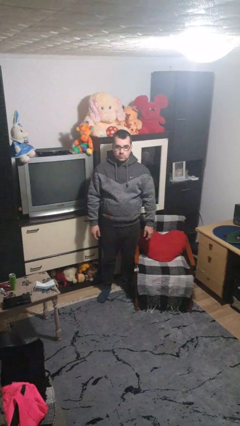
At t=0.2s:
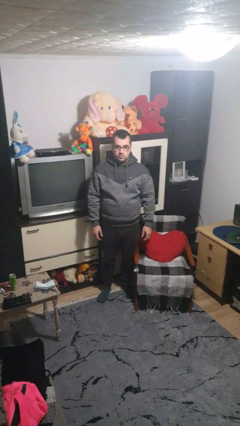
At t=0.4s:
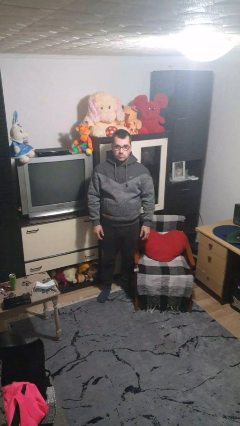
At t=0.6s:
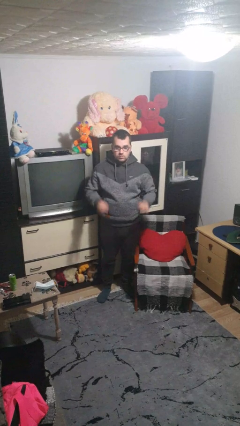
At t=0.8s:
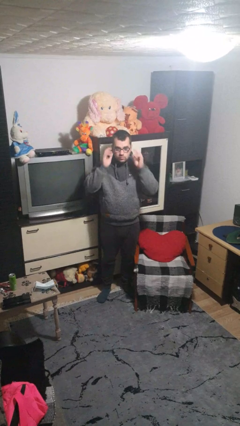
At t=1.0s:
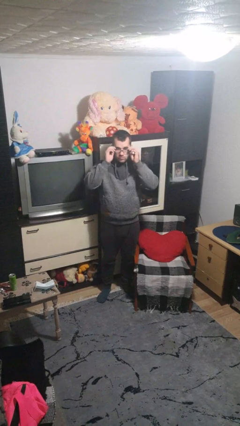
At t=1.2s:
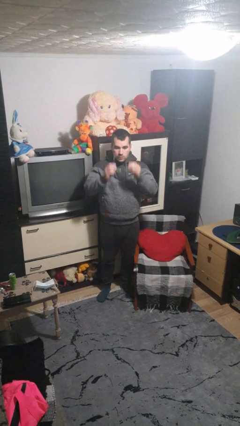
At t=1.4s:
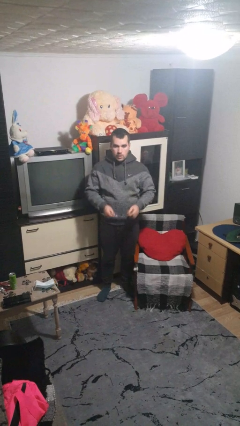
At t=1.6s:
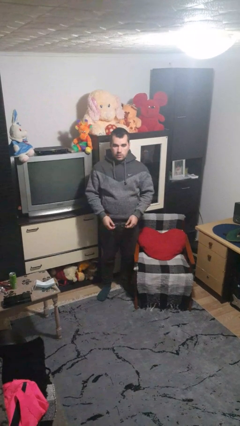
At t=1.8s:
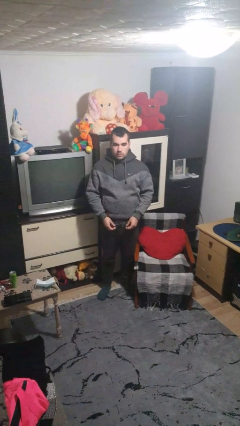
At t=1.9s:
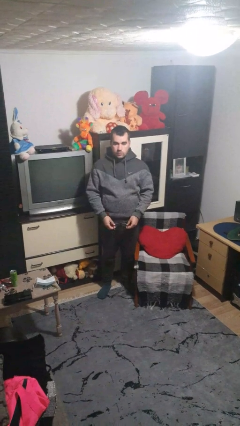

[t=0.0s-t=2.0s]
person takes off glasses

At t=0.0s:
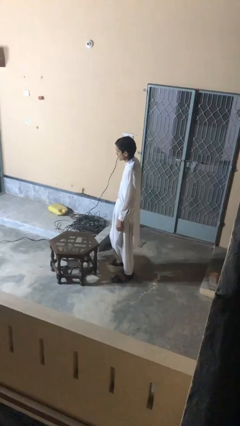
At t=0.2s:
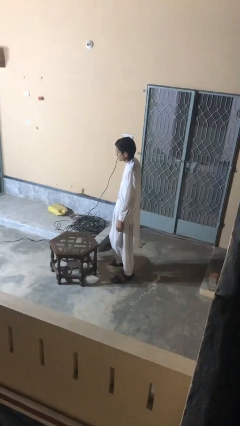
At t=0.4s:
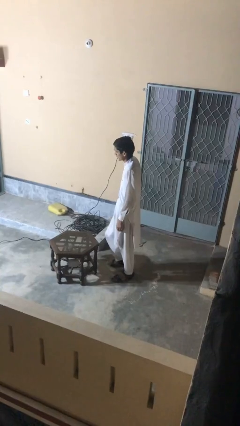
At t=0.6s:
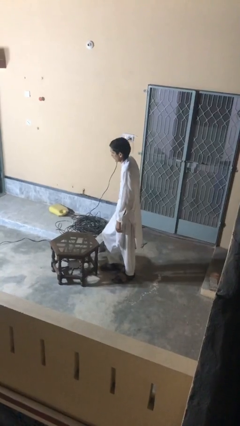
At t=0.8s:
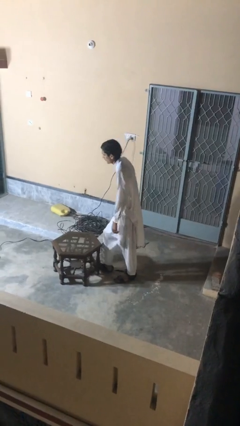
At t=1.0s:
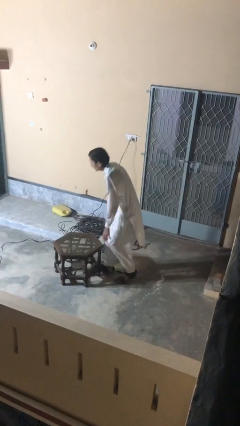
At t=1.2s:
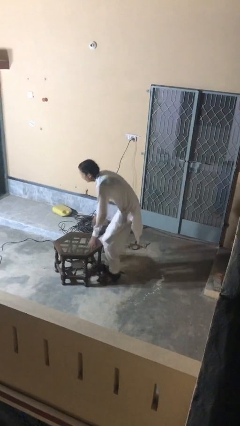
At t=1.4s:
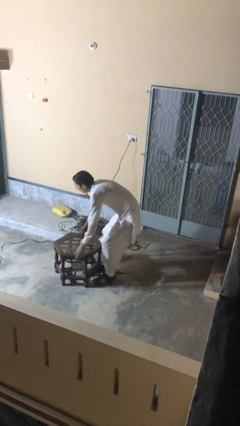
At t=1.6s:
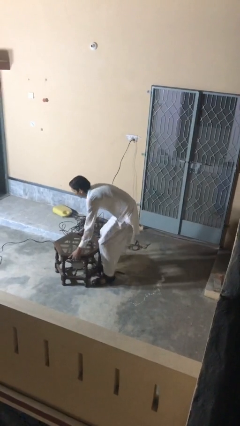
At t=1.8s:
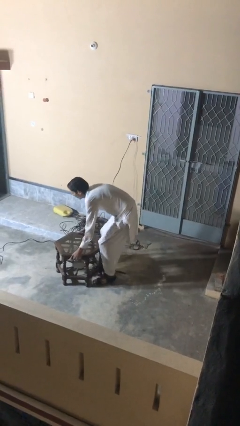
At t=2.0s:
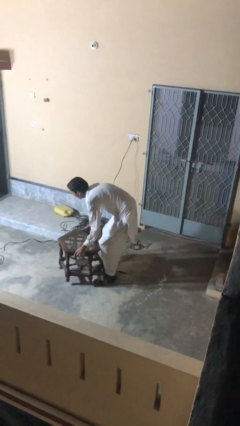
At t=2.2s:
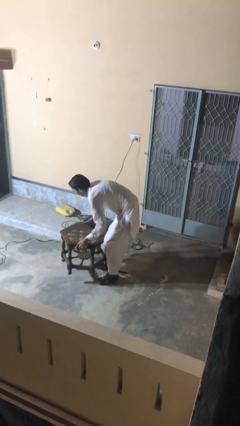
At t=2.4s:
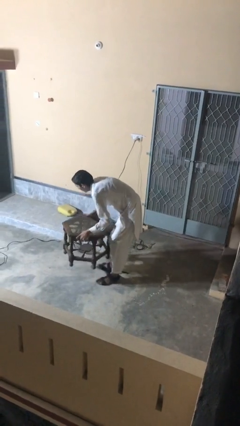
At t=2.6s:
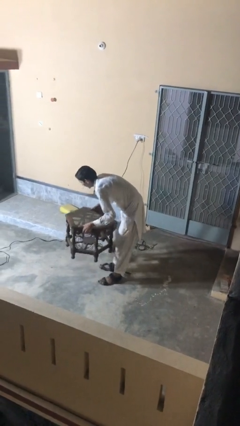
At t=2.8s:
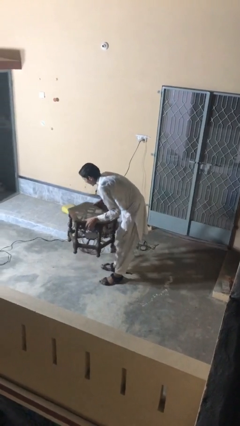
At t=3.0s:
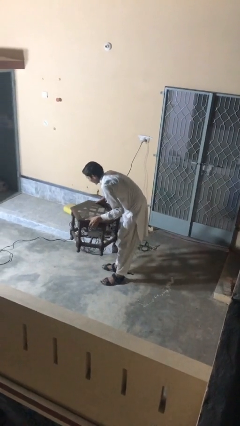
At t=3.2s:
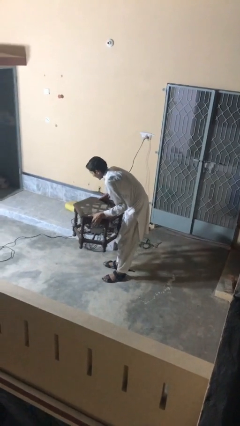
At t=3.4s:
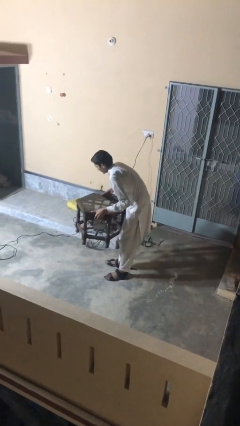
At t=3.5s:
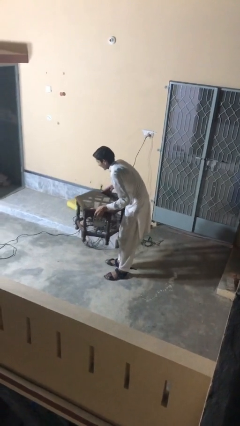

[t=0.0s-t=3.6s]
person picks up object from floor

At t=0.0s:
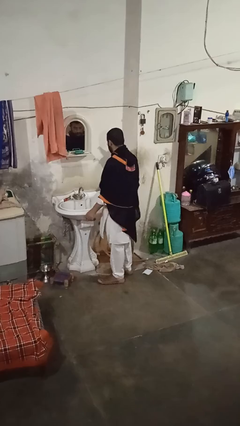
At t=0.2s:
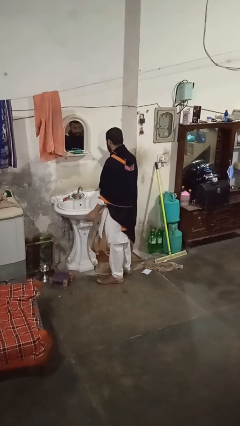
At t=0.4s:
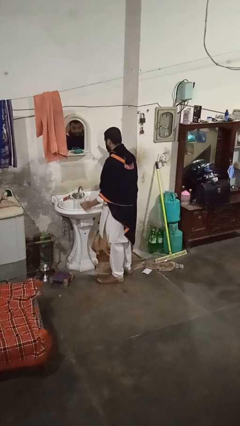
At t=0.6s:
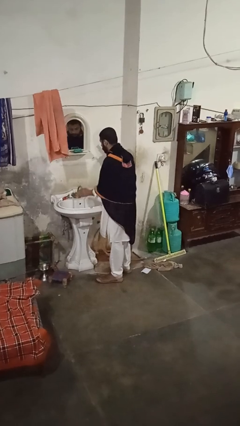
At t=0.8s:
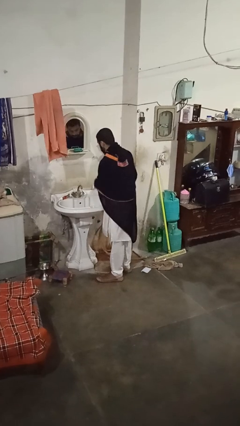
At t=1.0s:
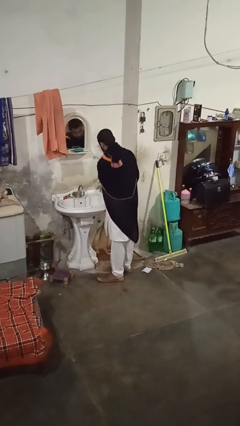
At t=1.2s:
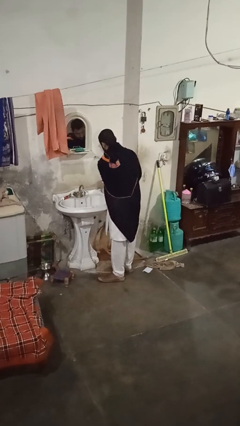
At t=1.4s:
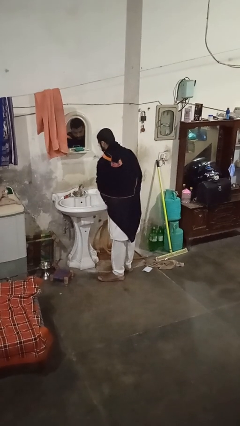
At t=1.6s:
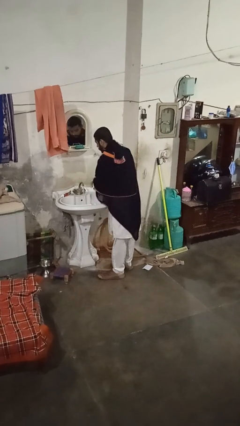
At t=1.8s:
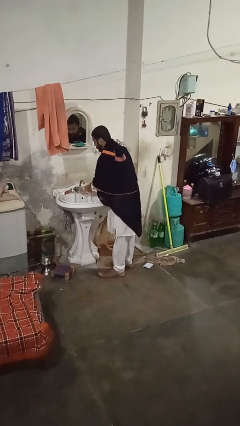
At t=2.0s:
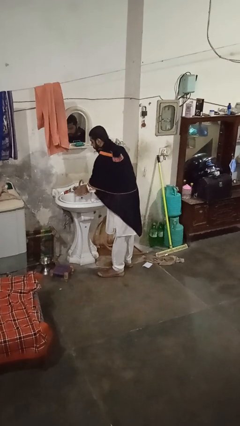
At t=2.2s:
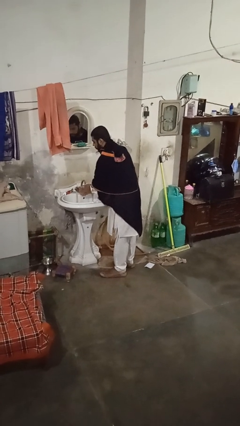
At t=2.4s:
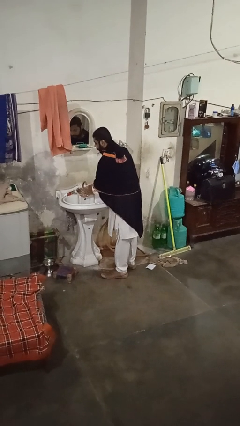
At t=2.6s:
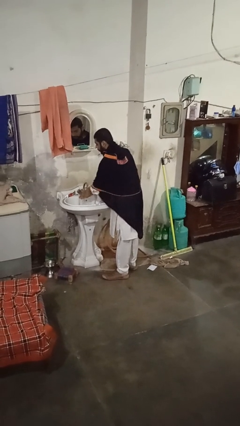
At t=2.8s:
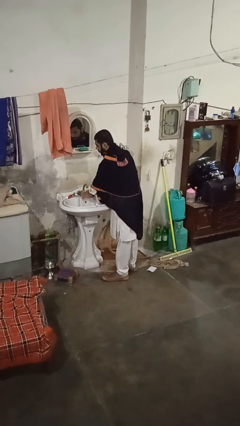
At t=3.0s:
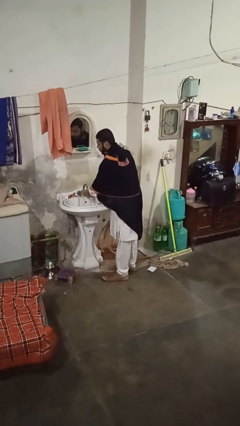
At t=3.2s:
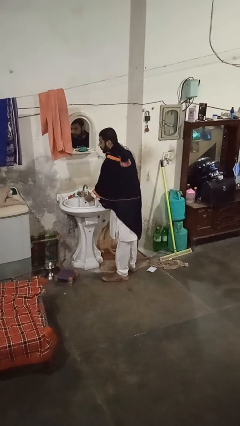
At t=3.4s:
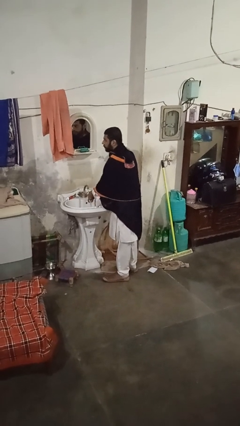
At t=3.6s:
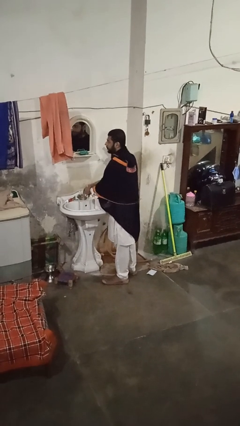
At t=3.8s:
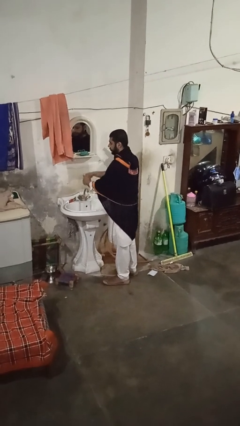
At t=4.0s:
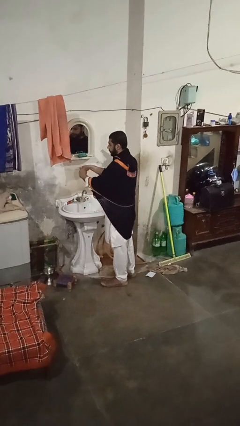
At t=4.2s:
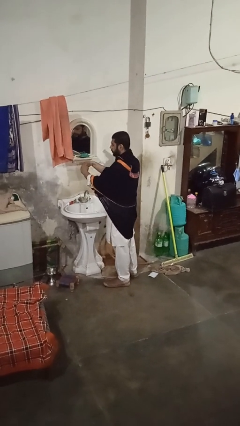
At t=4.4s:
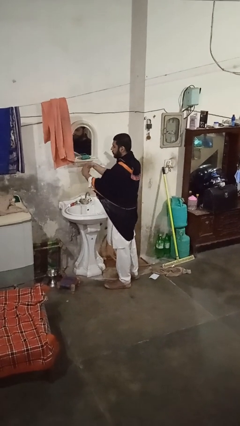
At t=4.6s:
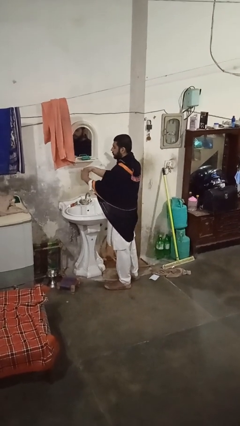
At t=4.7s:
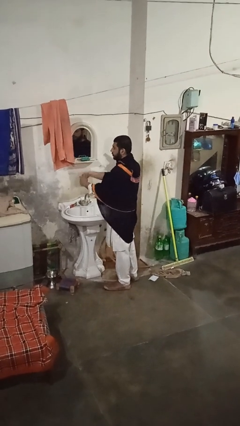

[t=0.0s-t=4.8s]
person washes hands

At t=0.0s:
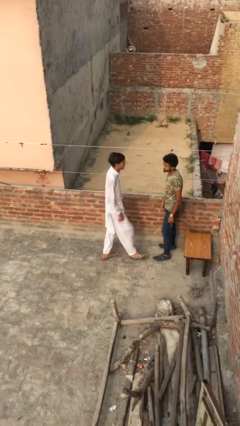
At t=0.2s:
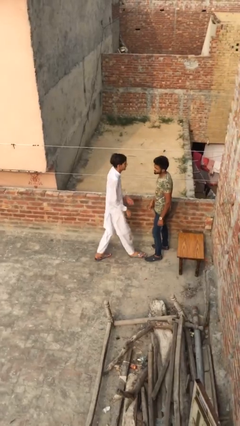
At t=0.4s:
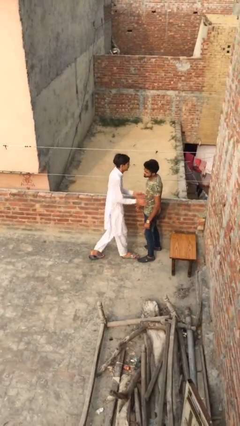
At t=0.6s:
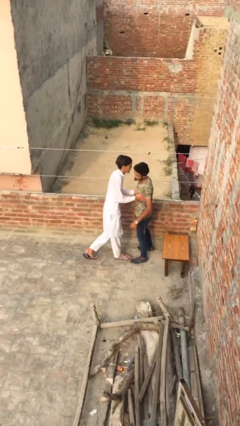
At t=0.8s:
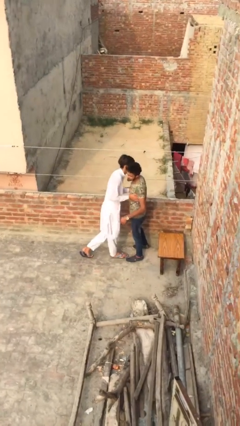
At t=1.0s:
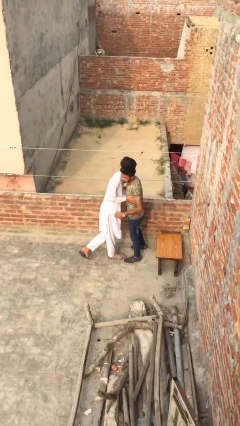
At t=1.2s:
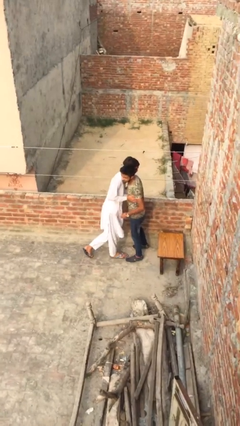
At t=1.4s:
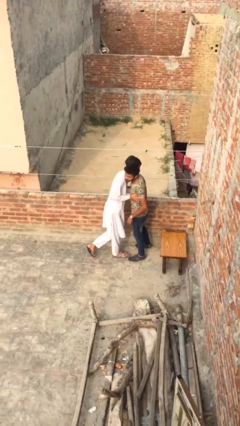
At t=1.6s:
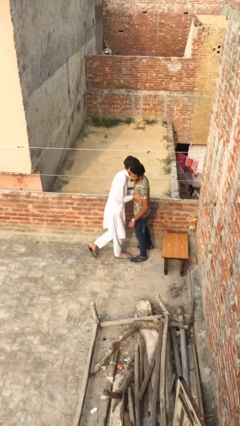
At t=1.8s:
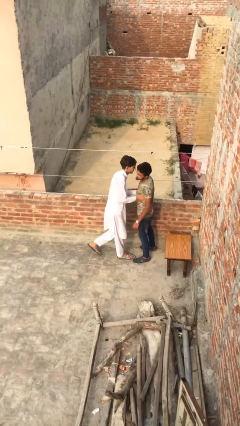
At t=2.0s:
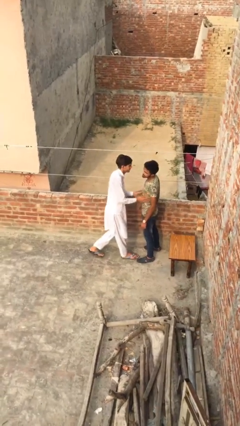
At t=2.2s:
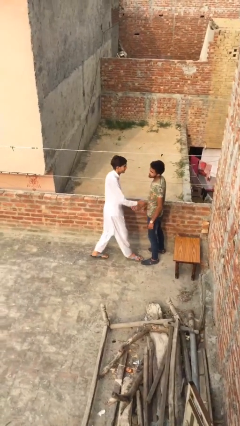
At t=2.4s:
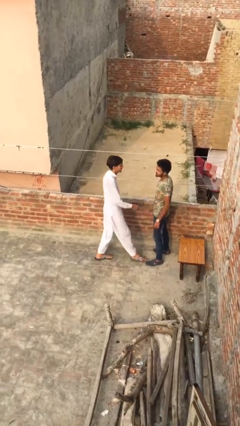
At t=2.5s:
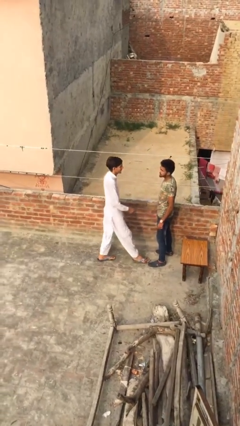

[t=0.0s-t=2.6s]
person embraces person

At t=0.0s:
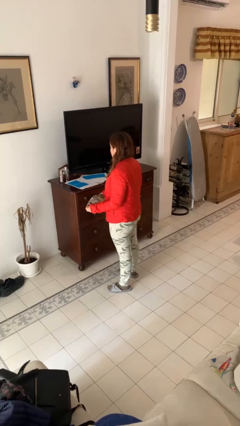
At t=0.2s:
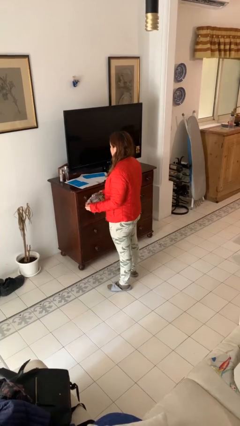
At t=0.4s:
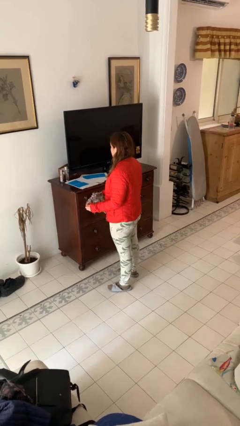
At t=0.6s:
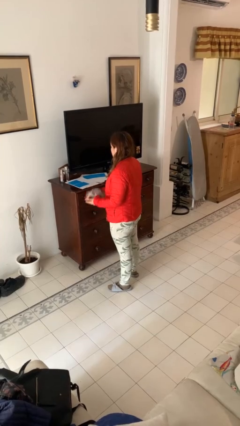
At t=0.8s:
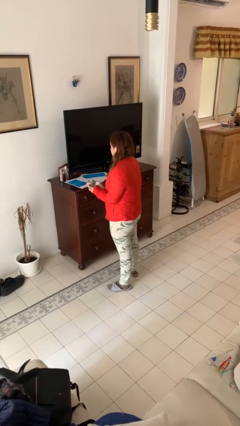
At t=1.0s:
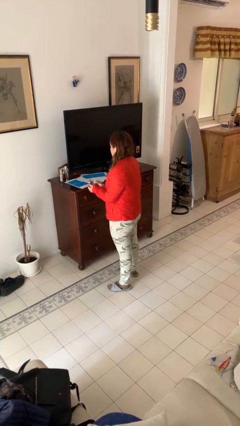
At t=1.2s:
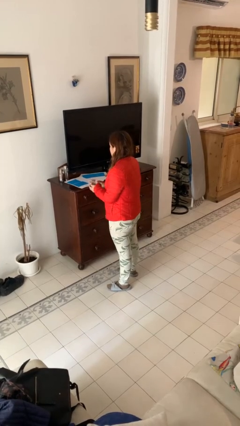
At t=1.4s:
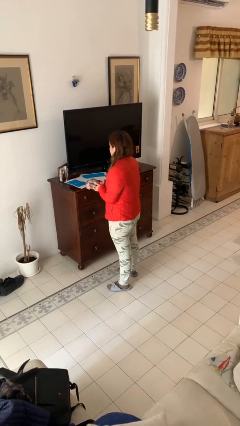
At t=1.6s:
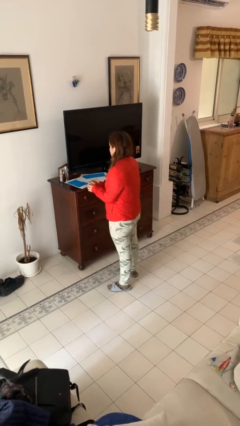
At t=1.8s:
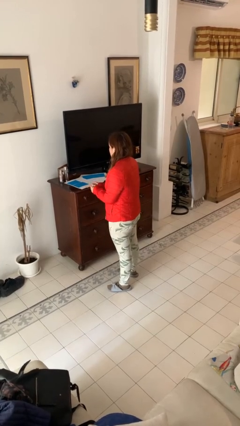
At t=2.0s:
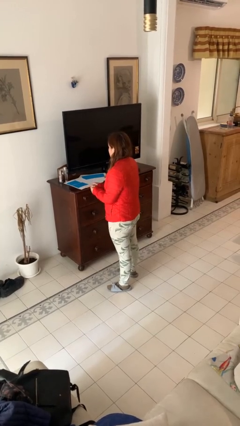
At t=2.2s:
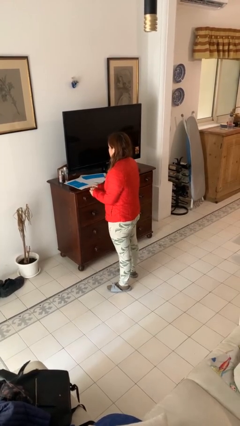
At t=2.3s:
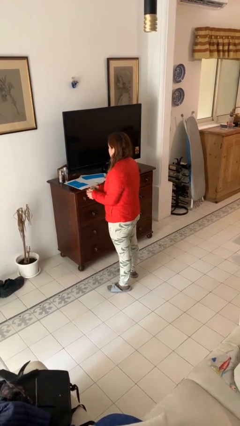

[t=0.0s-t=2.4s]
person crumples paper

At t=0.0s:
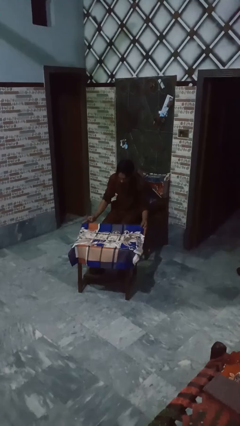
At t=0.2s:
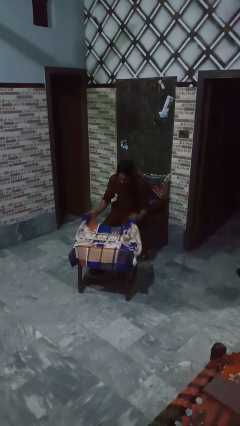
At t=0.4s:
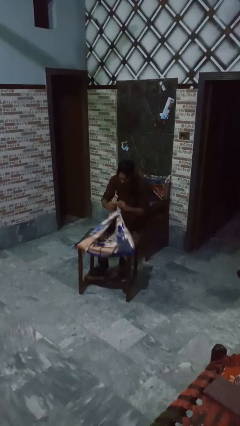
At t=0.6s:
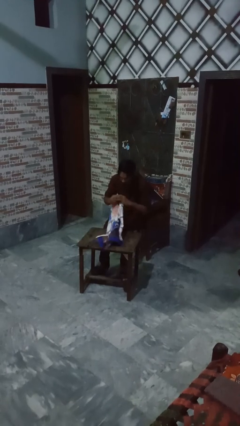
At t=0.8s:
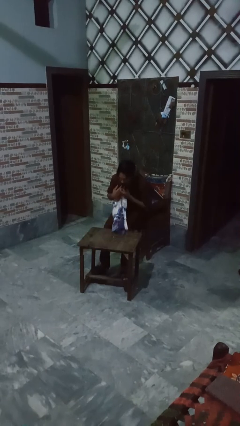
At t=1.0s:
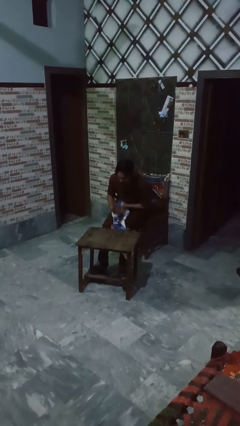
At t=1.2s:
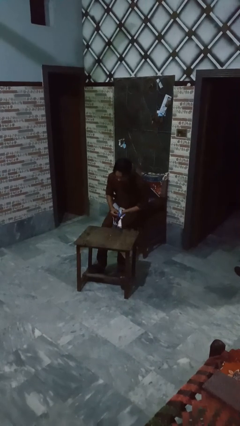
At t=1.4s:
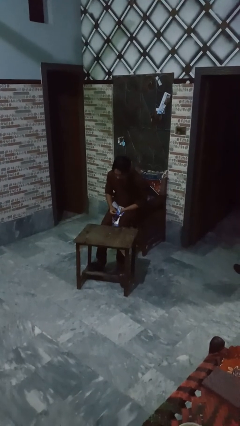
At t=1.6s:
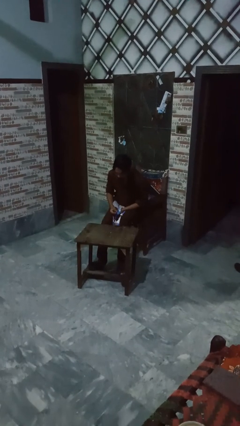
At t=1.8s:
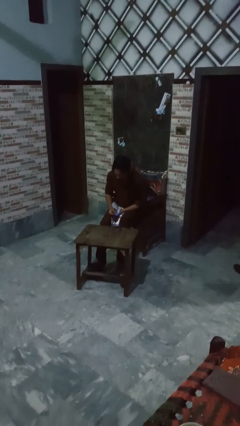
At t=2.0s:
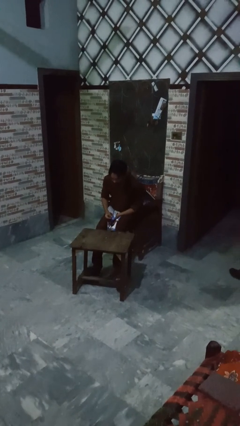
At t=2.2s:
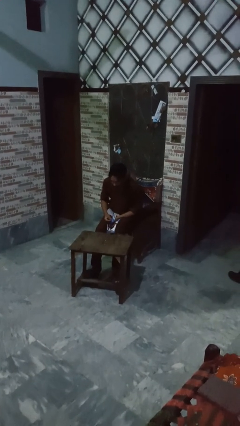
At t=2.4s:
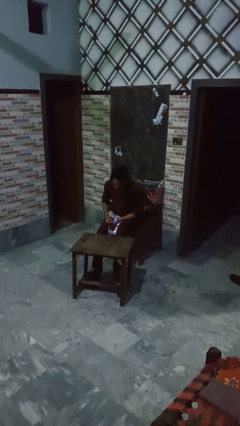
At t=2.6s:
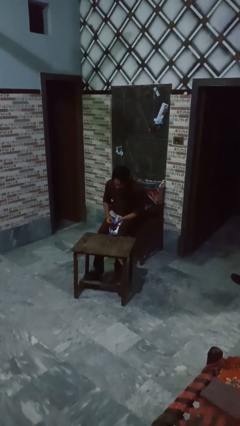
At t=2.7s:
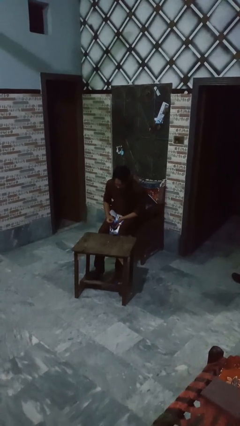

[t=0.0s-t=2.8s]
person folds tablecloth
